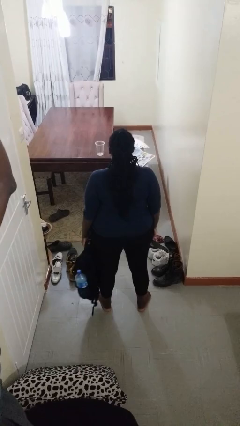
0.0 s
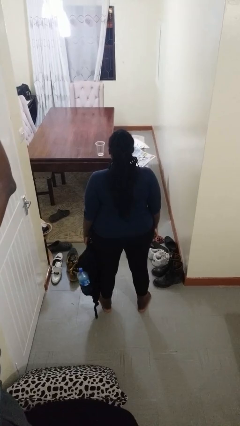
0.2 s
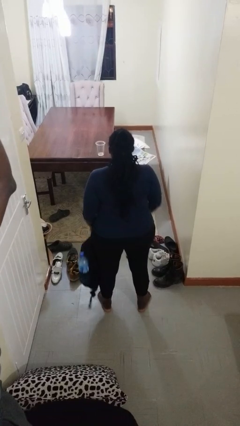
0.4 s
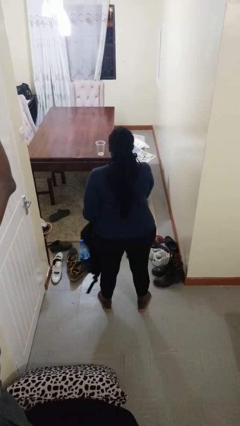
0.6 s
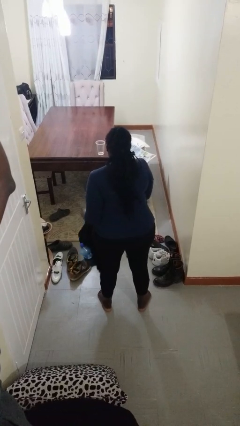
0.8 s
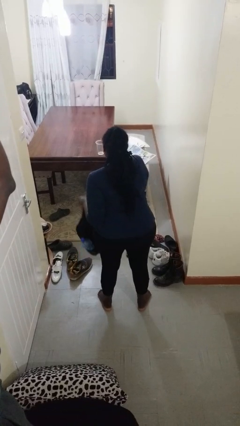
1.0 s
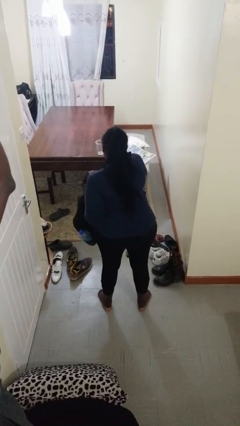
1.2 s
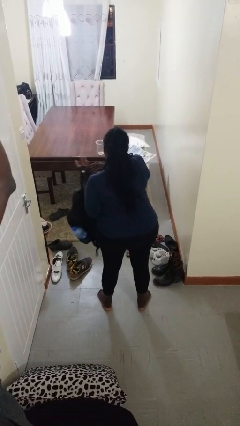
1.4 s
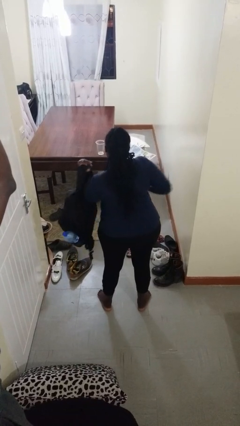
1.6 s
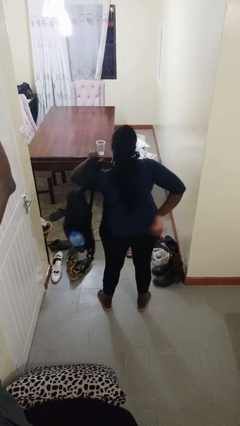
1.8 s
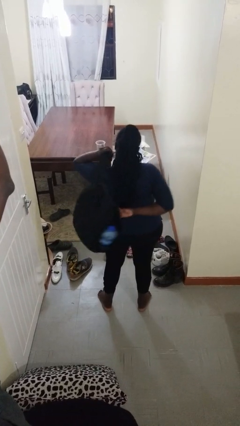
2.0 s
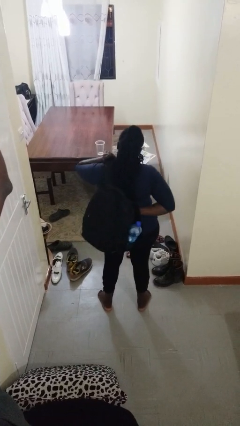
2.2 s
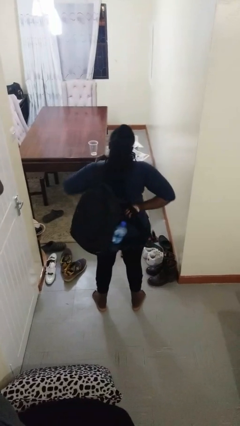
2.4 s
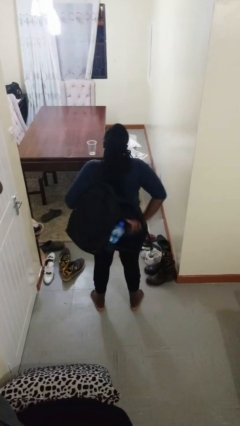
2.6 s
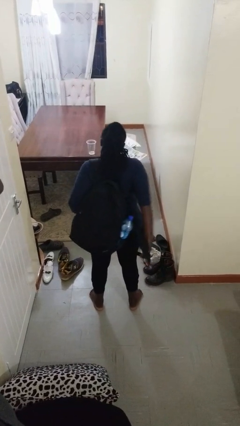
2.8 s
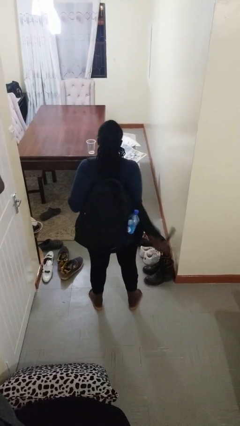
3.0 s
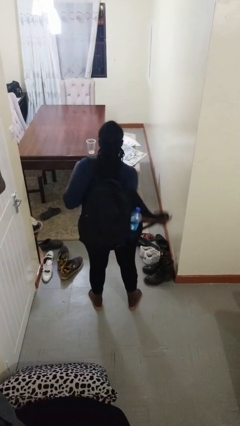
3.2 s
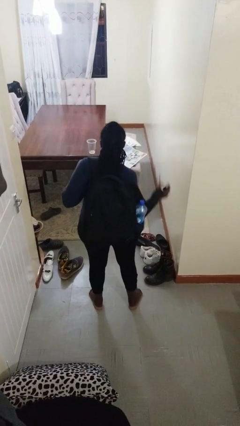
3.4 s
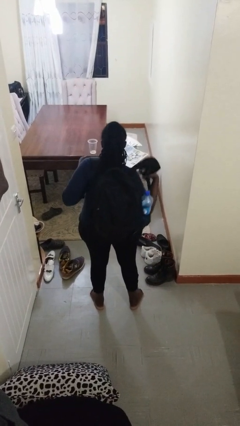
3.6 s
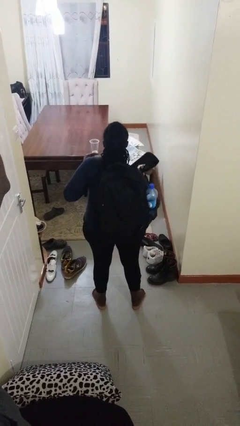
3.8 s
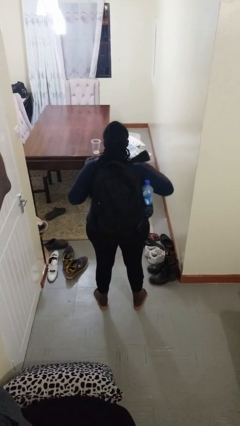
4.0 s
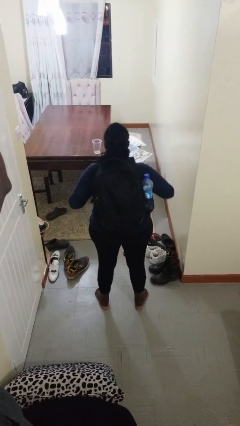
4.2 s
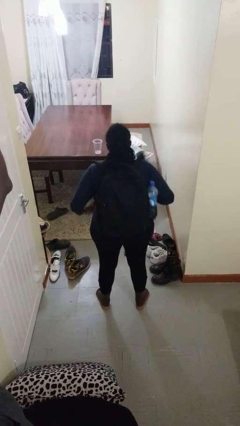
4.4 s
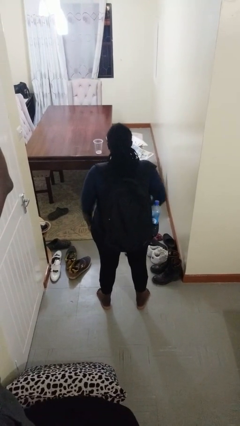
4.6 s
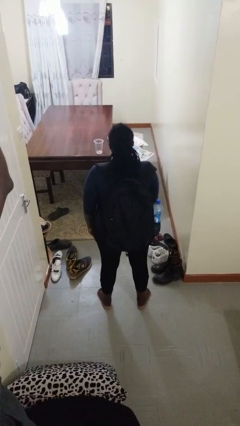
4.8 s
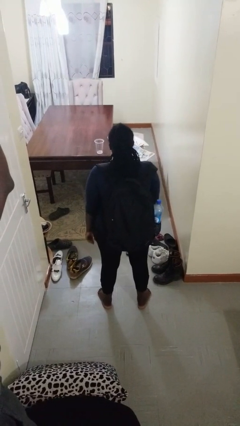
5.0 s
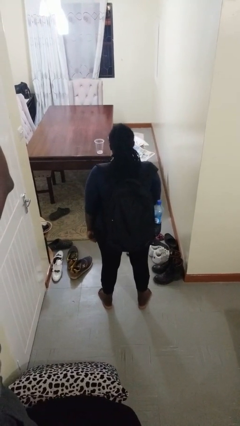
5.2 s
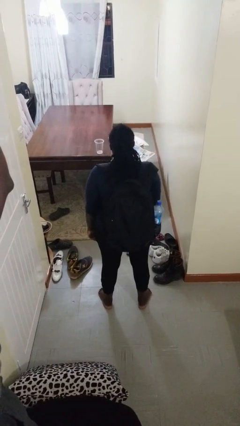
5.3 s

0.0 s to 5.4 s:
person puts on backpack

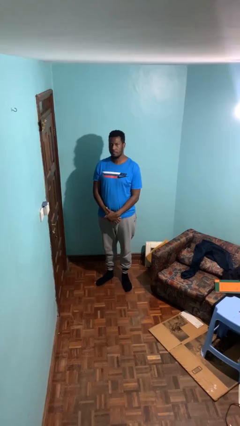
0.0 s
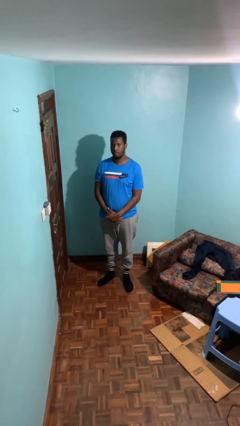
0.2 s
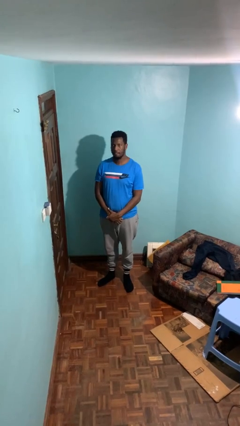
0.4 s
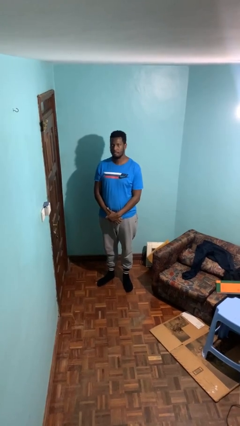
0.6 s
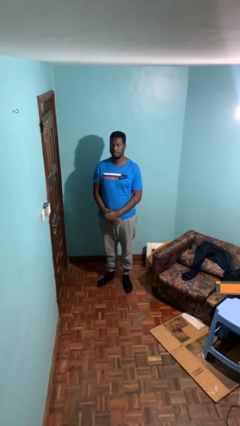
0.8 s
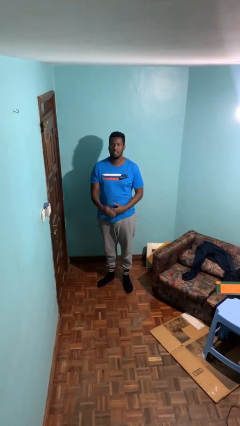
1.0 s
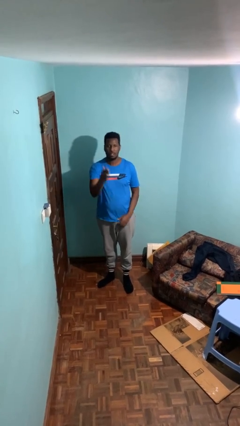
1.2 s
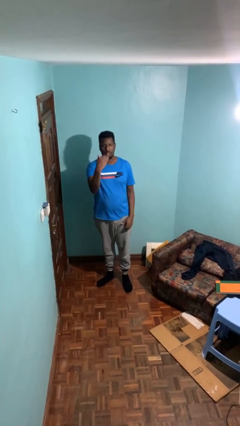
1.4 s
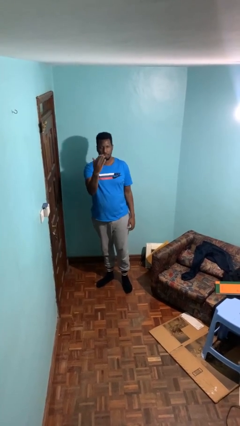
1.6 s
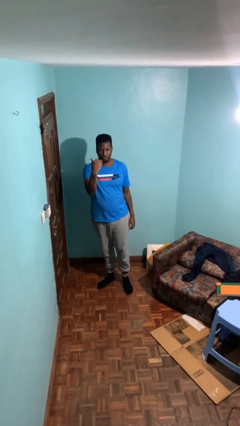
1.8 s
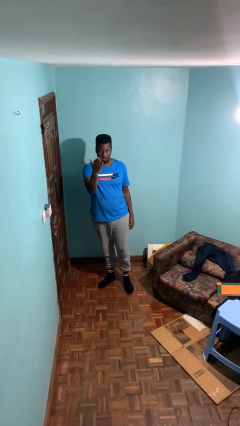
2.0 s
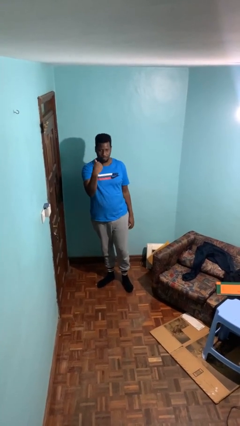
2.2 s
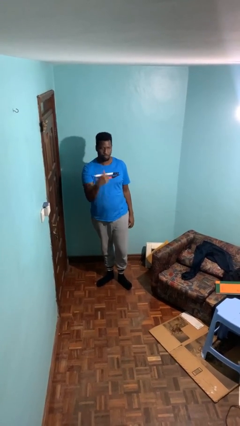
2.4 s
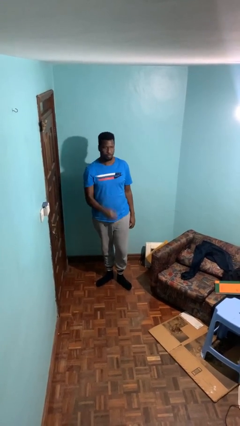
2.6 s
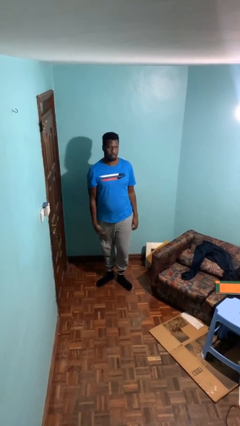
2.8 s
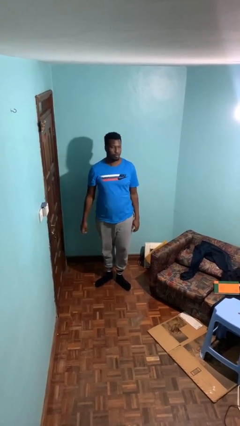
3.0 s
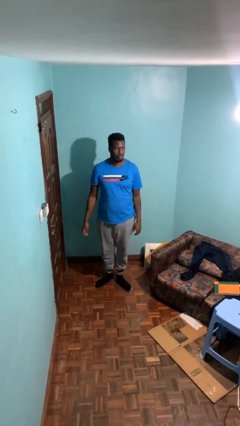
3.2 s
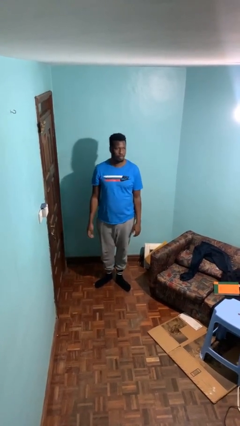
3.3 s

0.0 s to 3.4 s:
person gestures come here

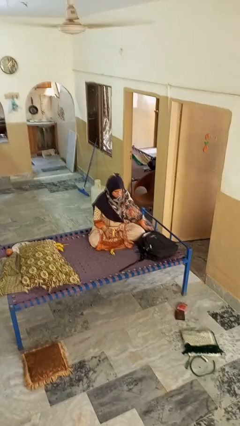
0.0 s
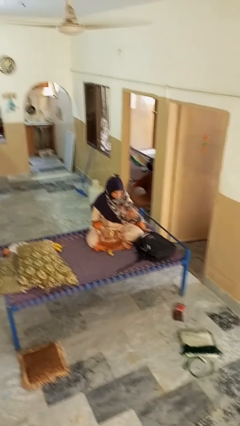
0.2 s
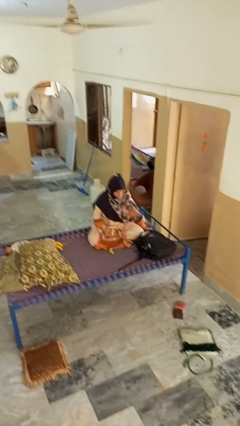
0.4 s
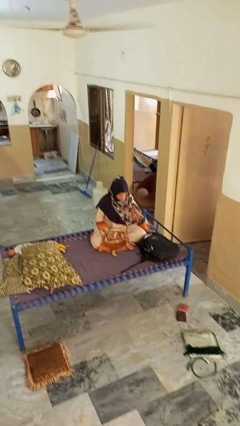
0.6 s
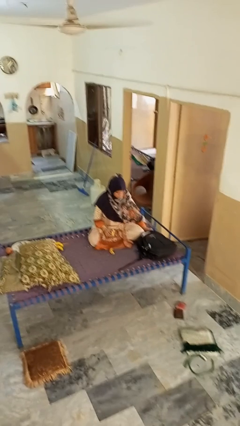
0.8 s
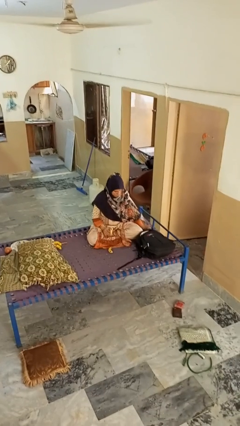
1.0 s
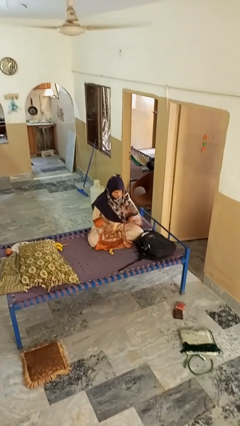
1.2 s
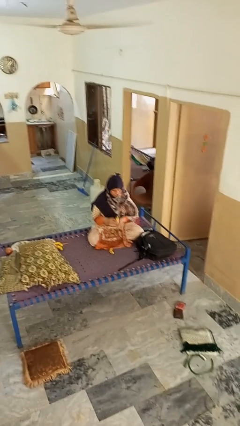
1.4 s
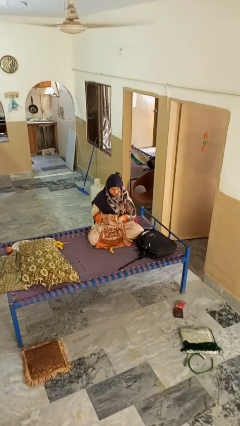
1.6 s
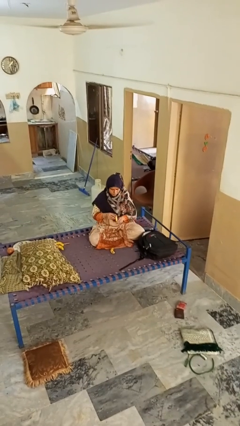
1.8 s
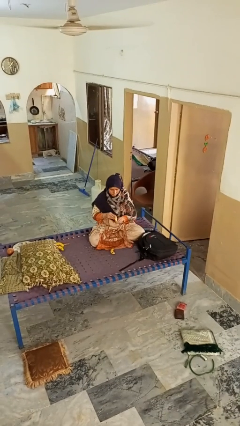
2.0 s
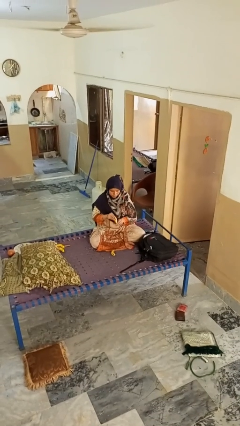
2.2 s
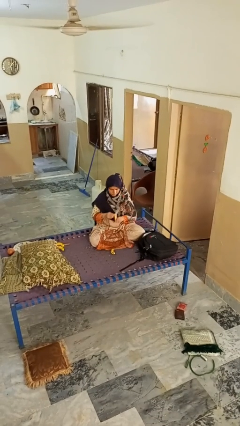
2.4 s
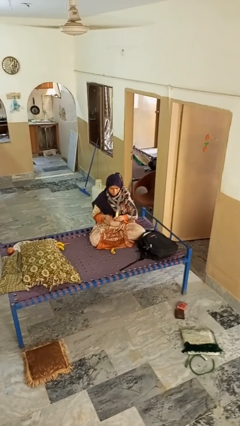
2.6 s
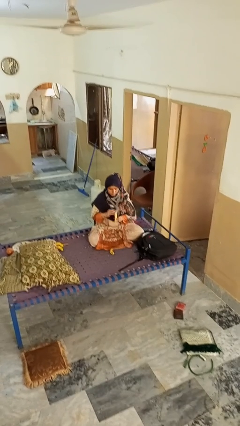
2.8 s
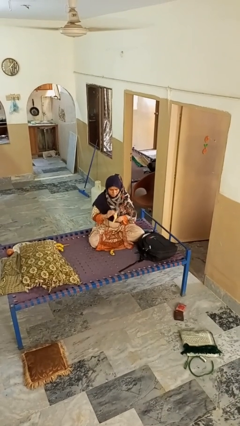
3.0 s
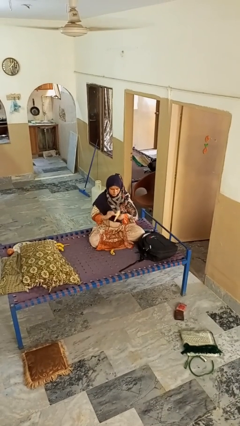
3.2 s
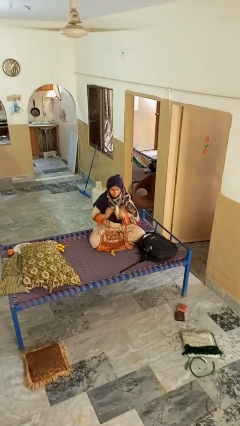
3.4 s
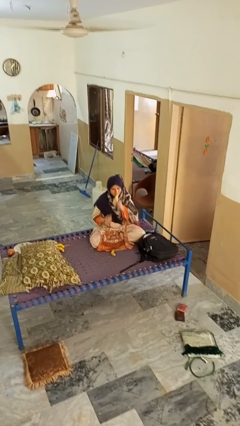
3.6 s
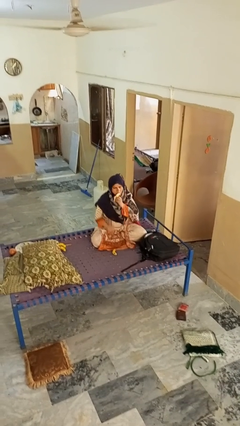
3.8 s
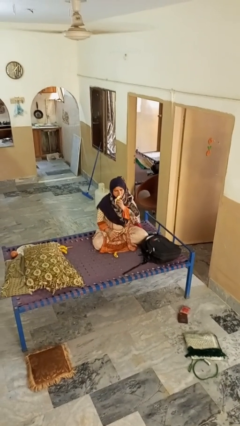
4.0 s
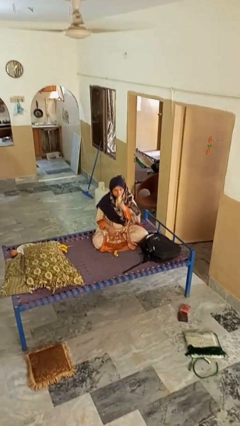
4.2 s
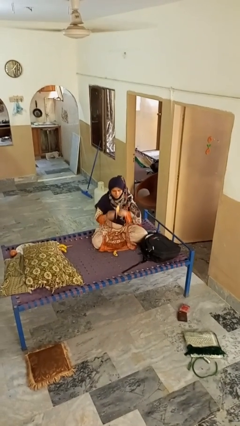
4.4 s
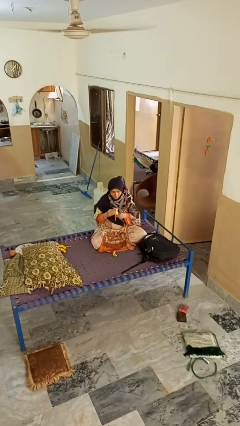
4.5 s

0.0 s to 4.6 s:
person eats banana

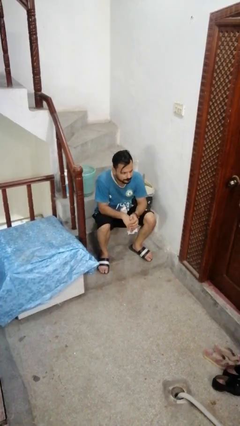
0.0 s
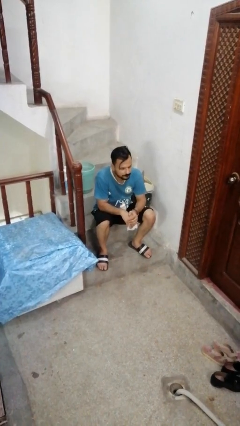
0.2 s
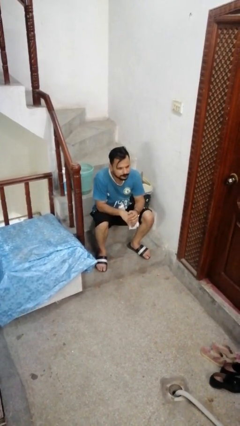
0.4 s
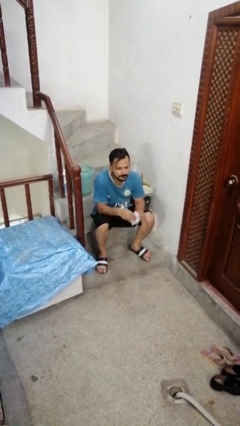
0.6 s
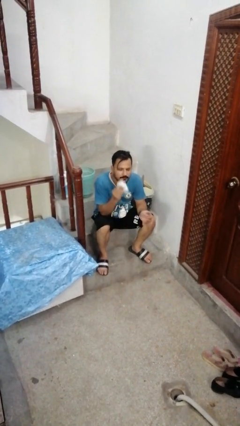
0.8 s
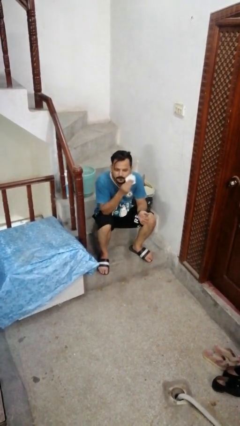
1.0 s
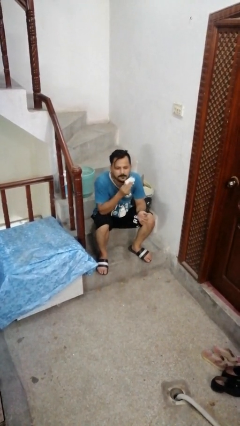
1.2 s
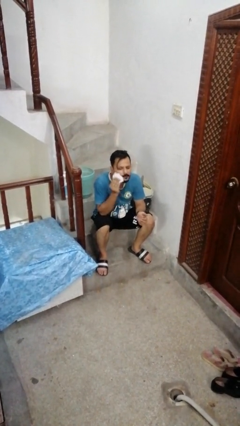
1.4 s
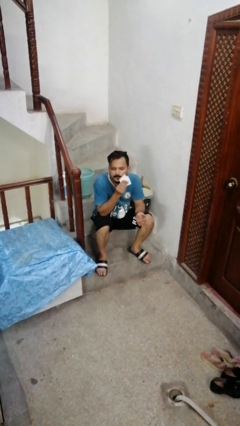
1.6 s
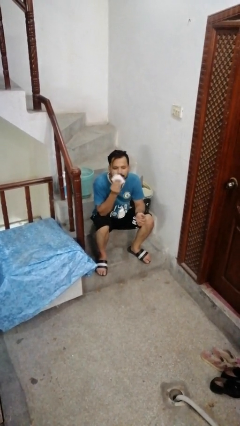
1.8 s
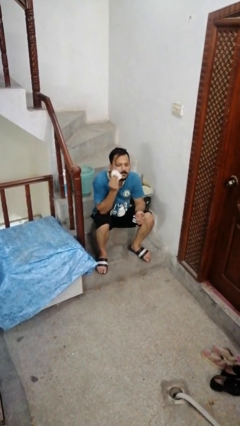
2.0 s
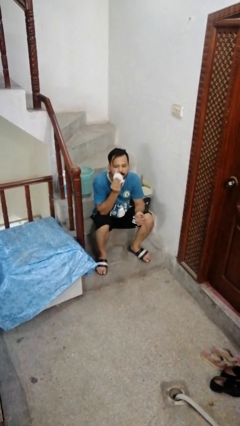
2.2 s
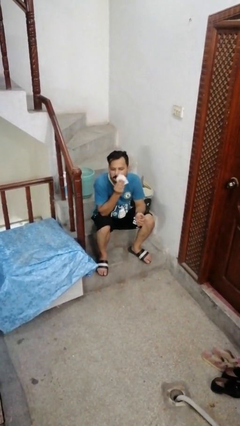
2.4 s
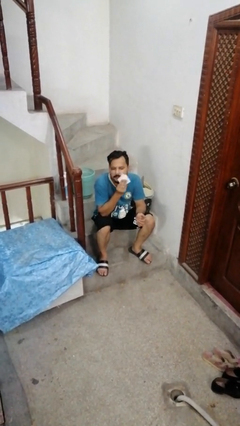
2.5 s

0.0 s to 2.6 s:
person wipes mouth with napkin

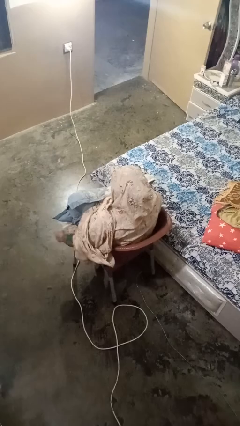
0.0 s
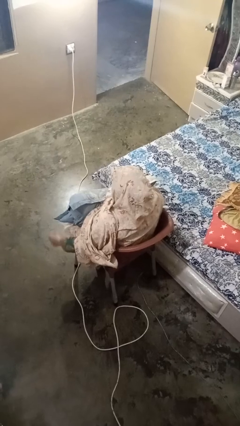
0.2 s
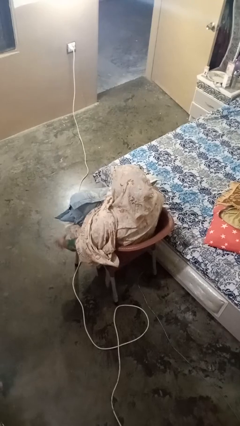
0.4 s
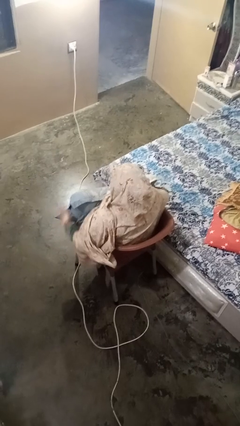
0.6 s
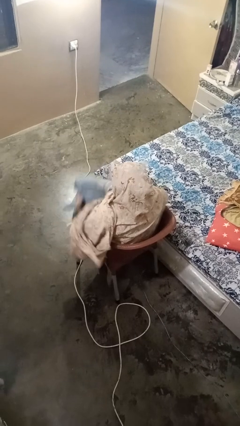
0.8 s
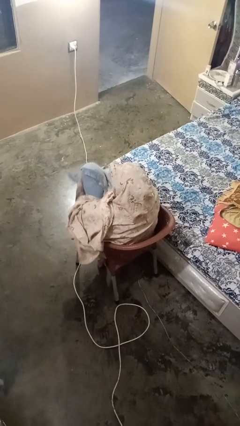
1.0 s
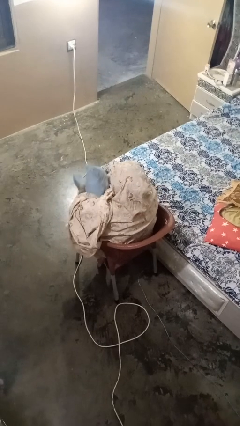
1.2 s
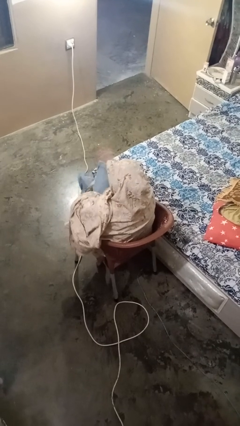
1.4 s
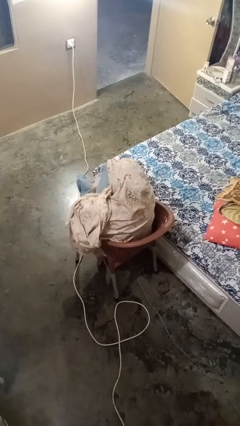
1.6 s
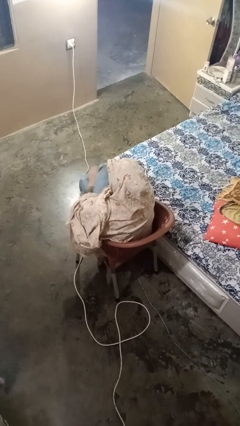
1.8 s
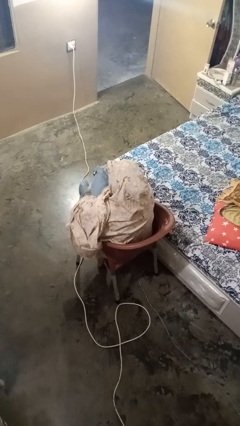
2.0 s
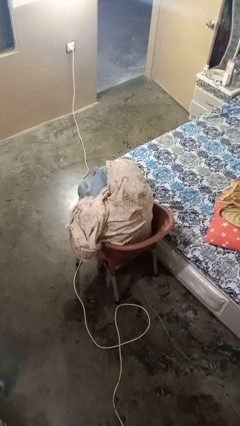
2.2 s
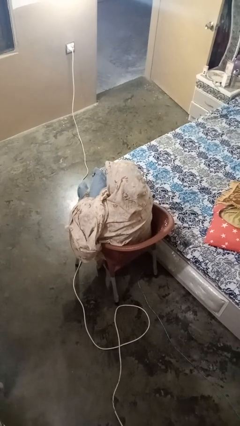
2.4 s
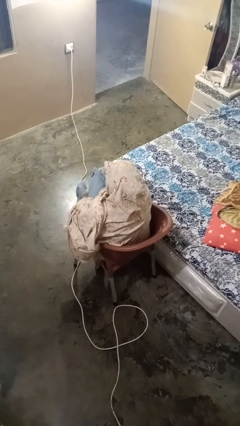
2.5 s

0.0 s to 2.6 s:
person squeezes object
